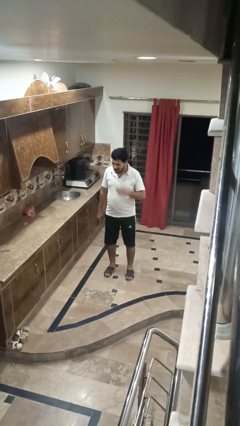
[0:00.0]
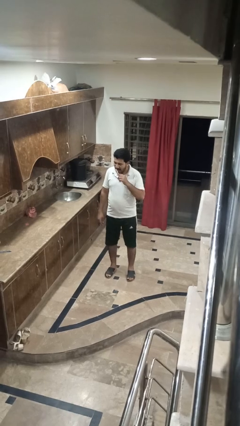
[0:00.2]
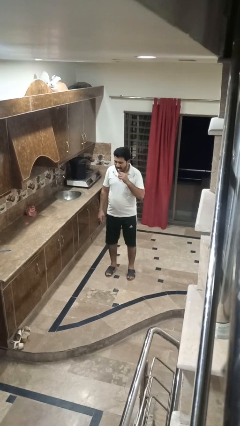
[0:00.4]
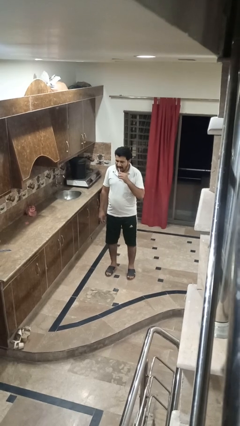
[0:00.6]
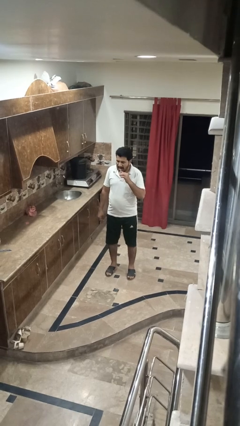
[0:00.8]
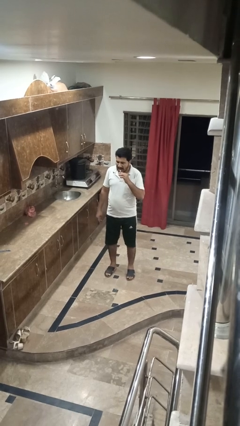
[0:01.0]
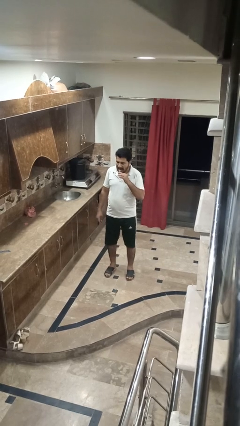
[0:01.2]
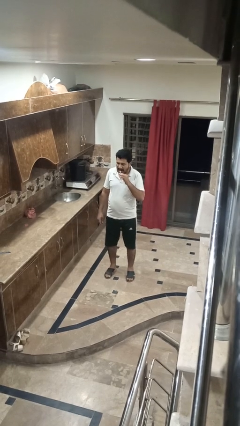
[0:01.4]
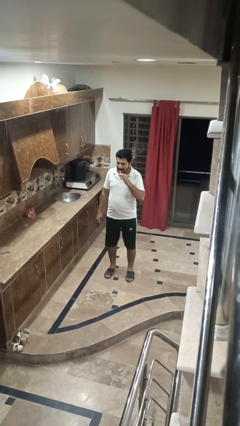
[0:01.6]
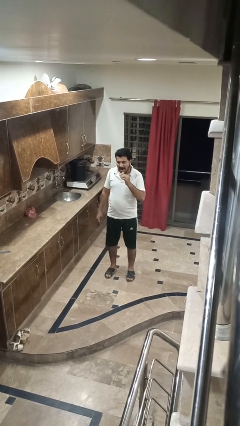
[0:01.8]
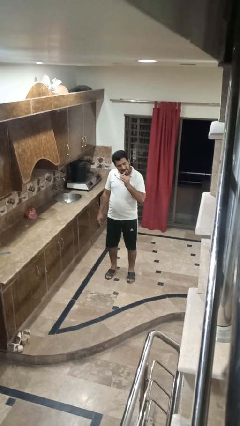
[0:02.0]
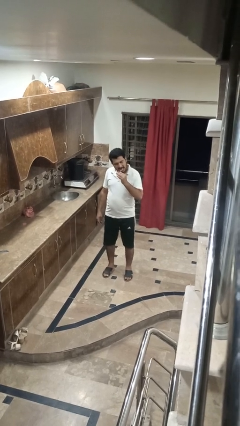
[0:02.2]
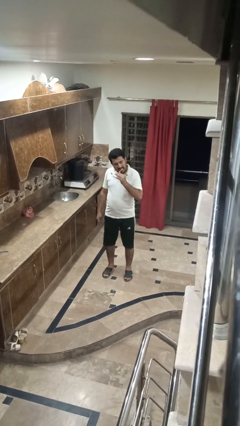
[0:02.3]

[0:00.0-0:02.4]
person brushes teeth

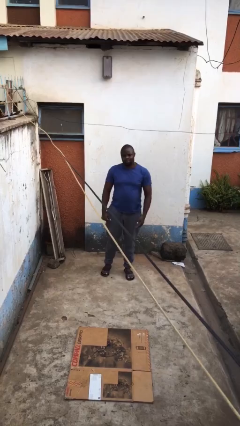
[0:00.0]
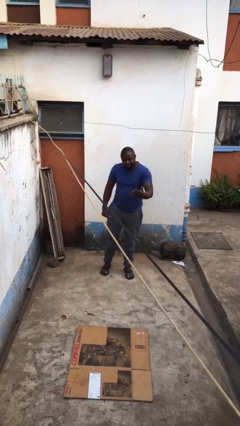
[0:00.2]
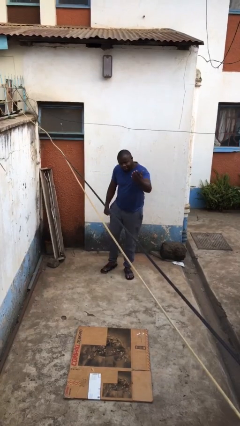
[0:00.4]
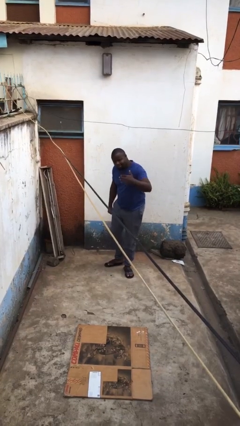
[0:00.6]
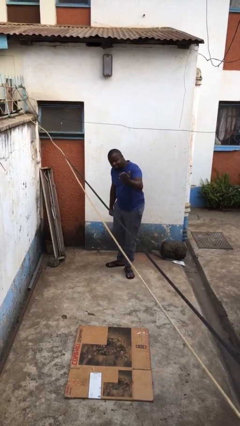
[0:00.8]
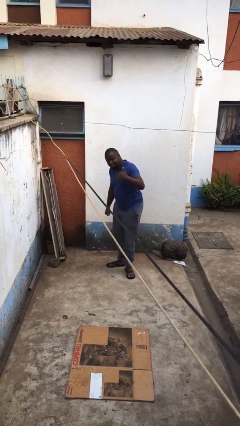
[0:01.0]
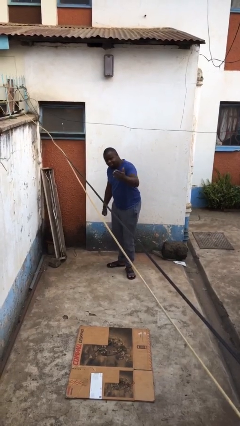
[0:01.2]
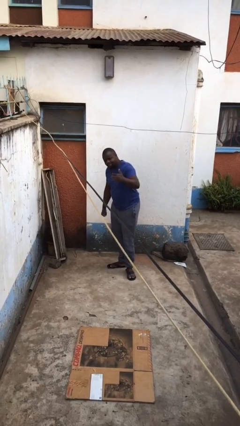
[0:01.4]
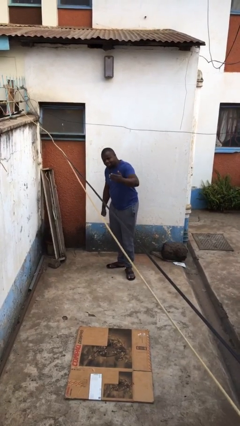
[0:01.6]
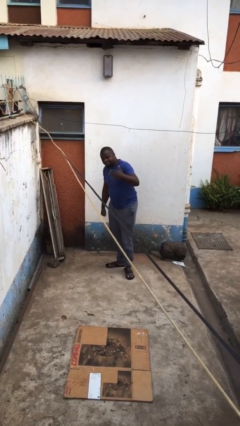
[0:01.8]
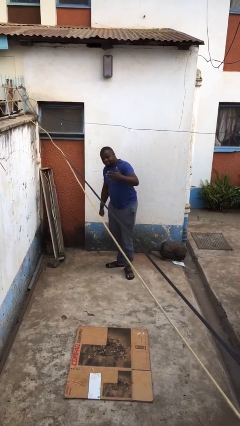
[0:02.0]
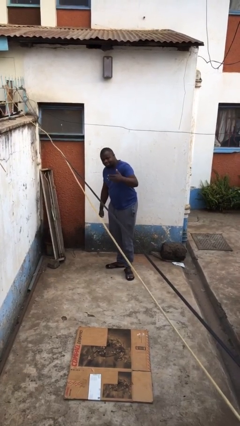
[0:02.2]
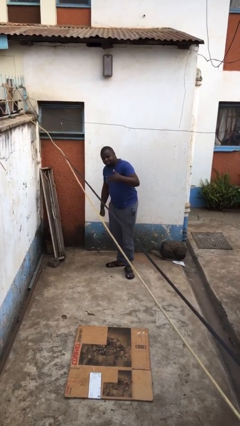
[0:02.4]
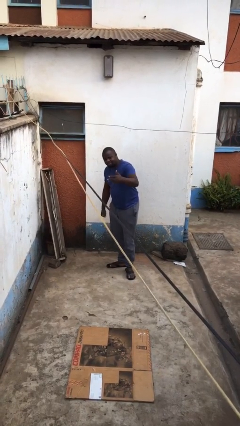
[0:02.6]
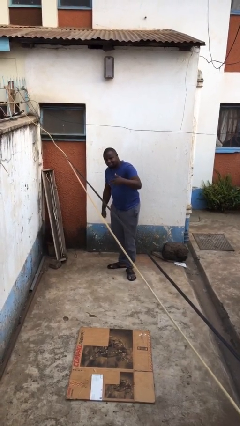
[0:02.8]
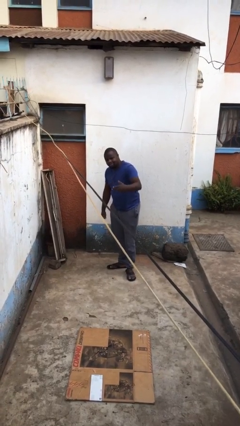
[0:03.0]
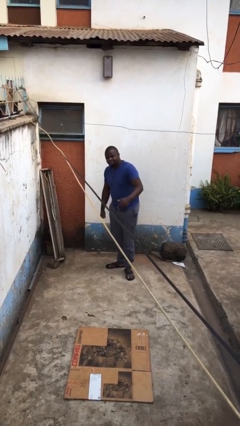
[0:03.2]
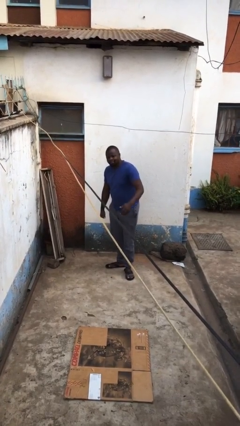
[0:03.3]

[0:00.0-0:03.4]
person gestures come here

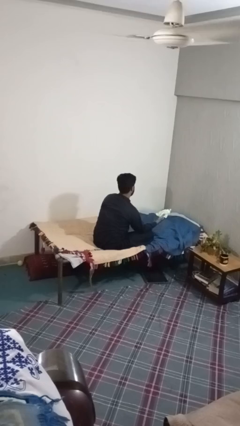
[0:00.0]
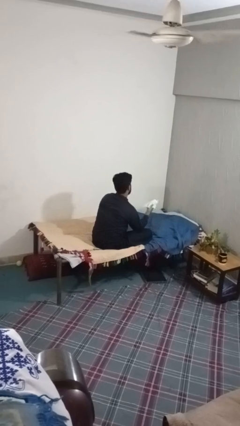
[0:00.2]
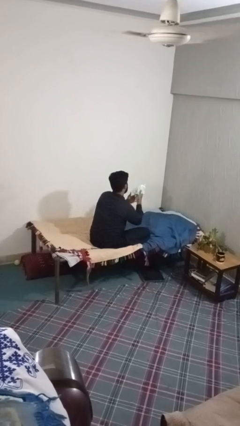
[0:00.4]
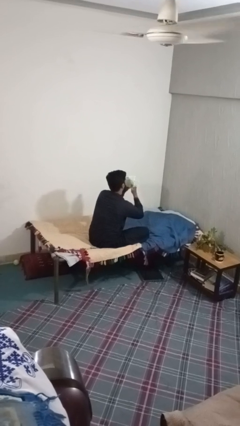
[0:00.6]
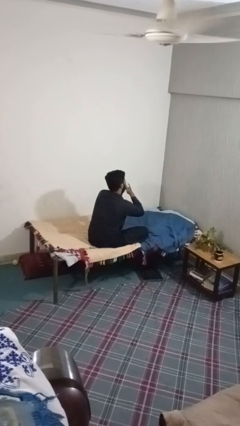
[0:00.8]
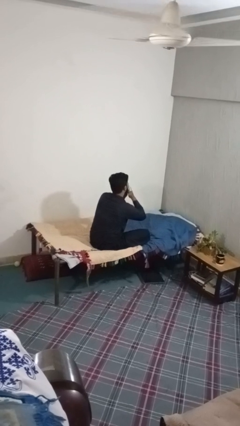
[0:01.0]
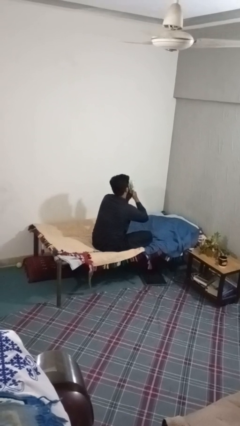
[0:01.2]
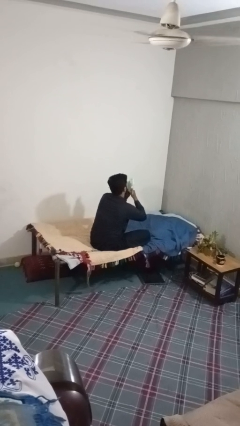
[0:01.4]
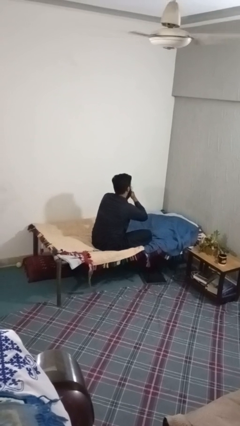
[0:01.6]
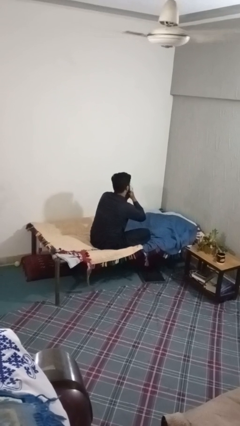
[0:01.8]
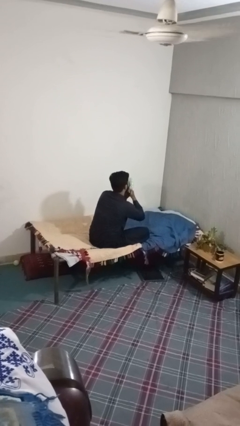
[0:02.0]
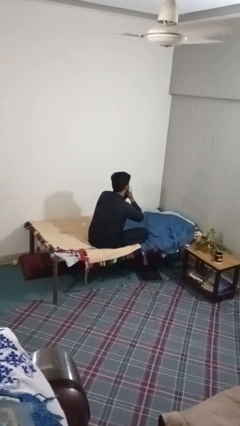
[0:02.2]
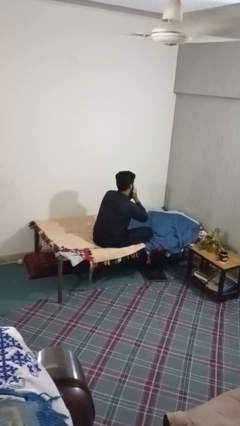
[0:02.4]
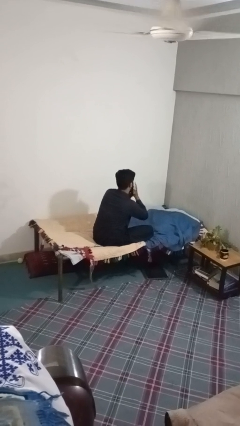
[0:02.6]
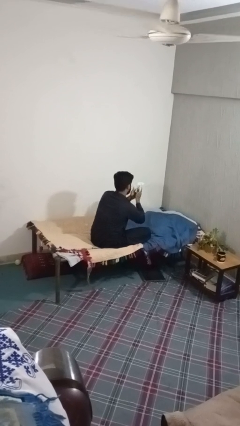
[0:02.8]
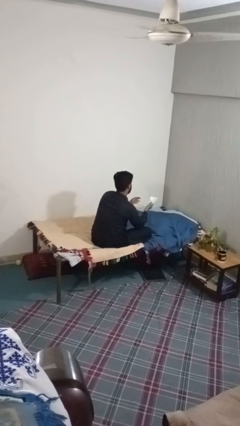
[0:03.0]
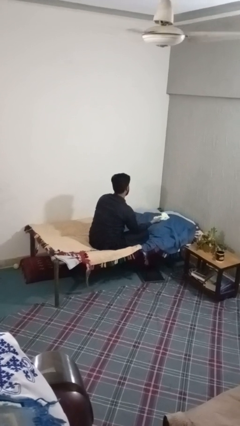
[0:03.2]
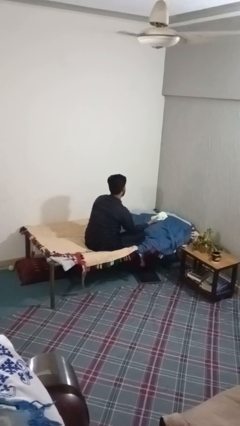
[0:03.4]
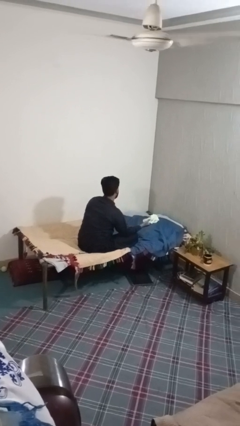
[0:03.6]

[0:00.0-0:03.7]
person blows nose

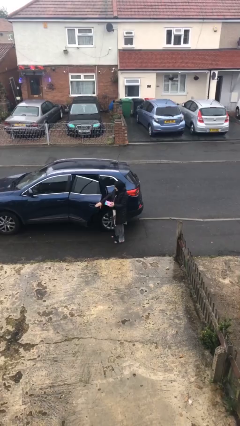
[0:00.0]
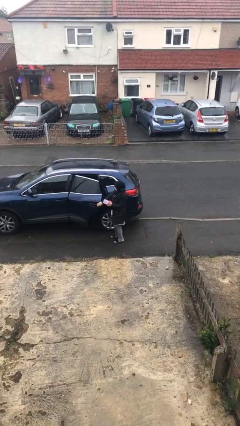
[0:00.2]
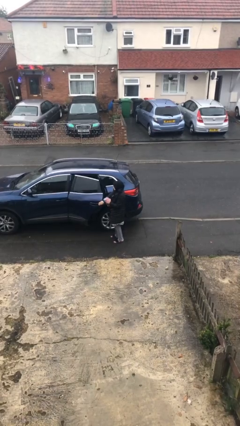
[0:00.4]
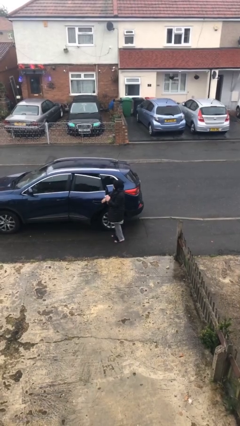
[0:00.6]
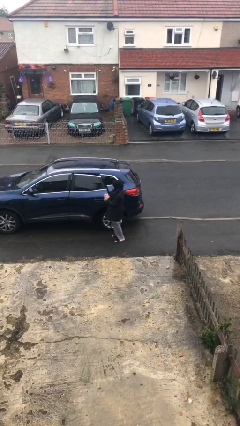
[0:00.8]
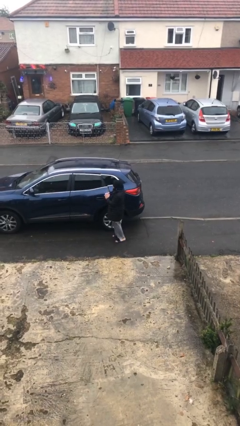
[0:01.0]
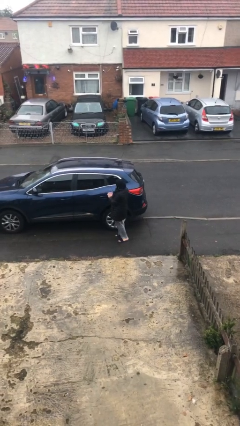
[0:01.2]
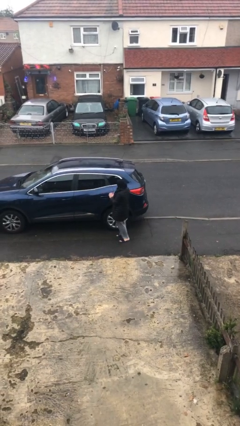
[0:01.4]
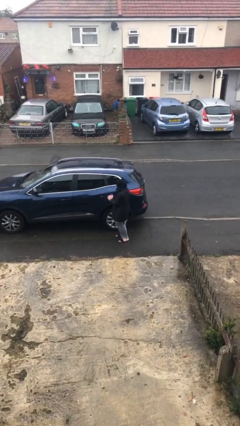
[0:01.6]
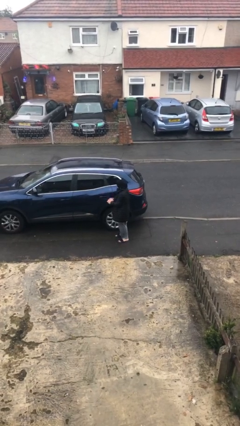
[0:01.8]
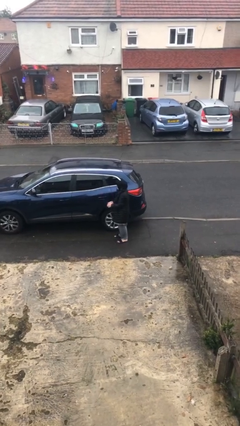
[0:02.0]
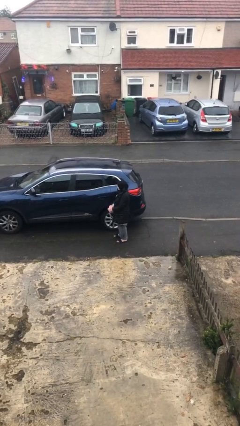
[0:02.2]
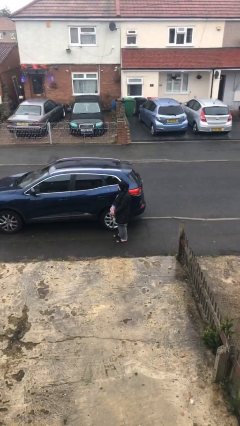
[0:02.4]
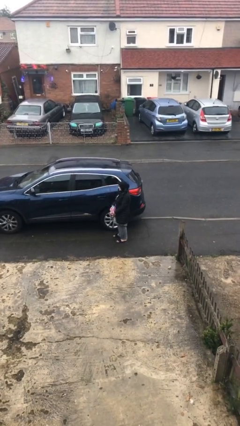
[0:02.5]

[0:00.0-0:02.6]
person closes car door

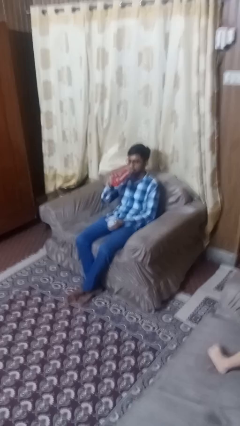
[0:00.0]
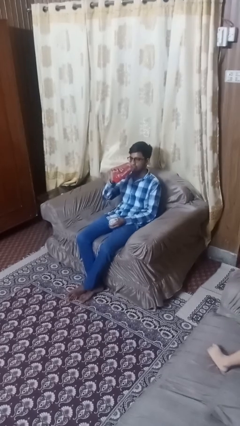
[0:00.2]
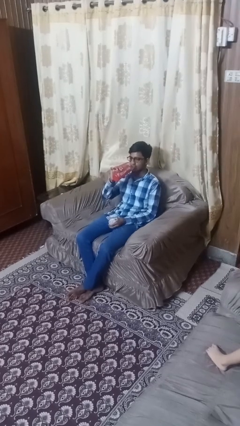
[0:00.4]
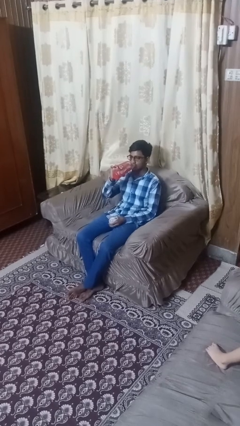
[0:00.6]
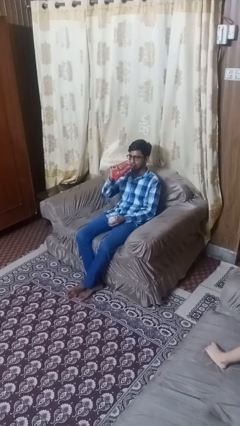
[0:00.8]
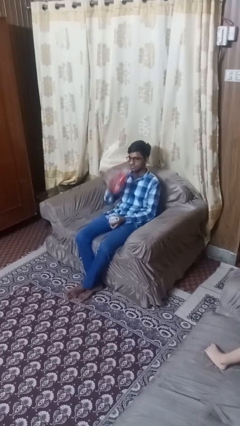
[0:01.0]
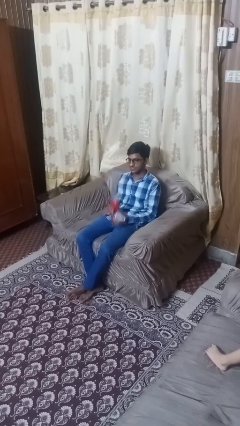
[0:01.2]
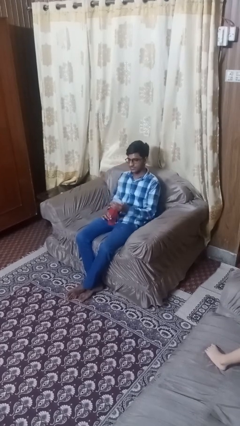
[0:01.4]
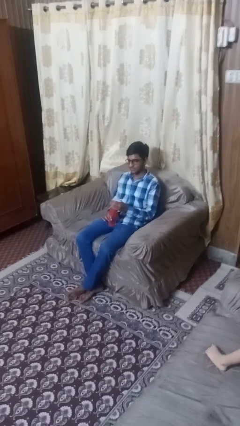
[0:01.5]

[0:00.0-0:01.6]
person drinks from bottle

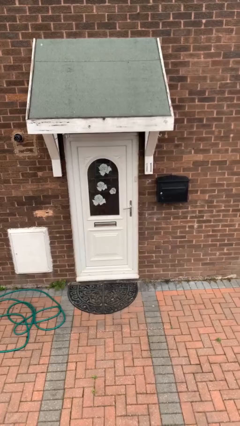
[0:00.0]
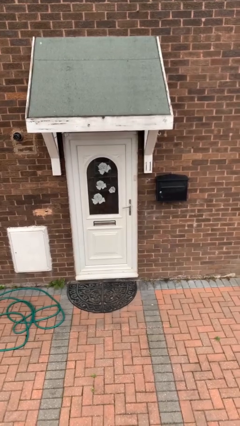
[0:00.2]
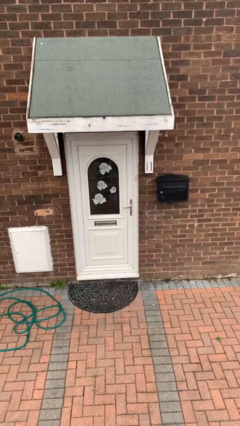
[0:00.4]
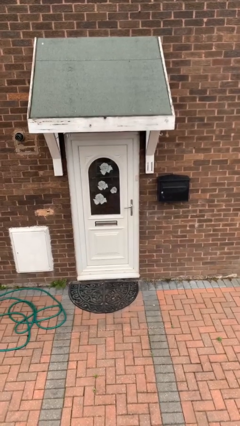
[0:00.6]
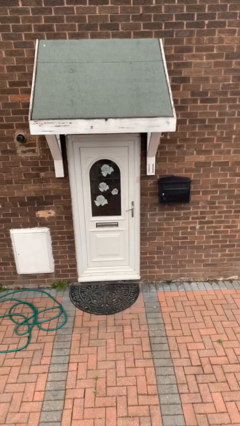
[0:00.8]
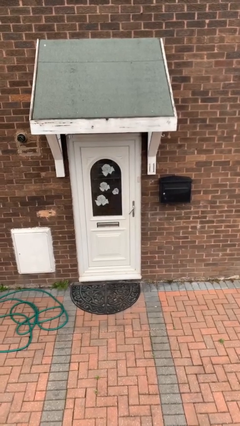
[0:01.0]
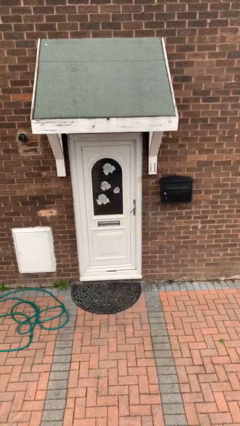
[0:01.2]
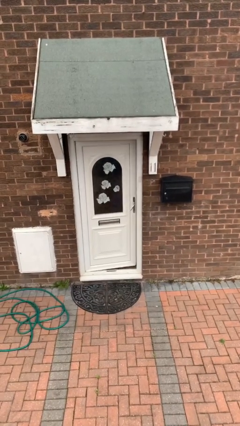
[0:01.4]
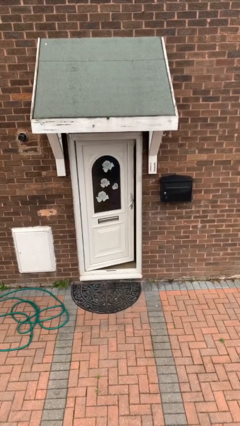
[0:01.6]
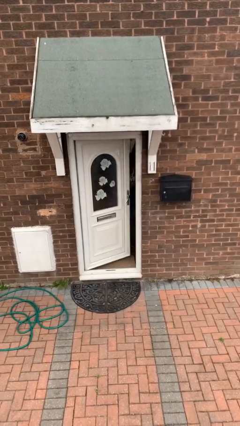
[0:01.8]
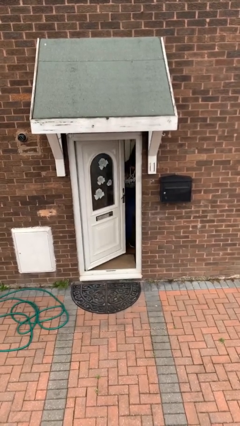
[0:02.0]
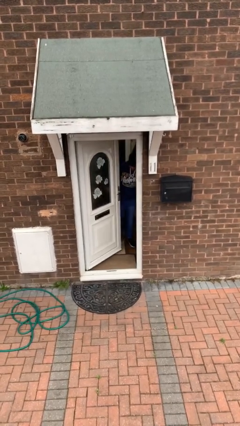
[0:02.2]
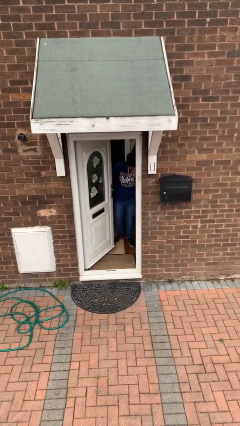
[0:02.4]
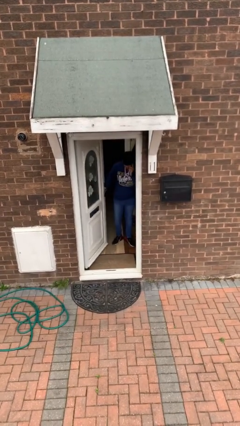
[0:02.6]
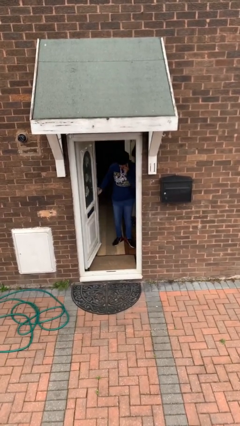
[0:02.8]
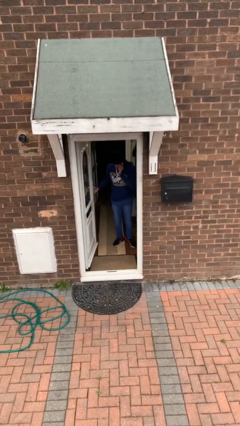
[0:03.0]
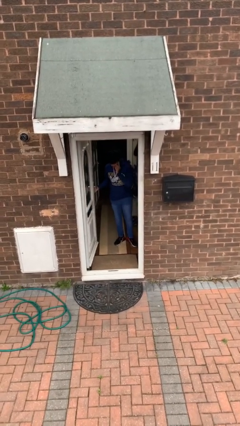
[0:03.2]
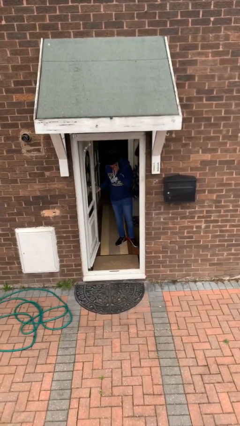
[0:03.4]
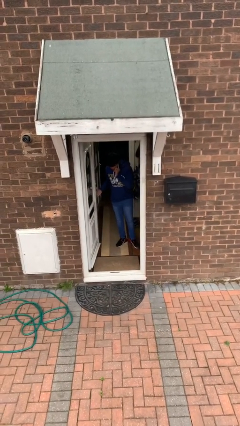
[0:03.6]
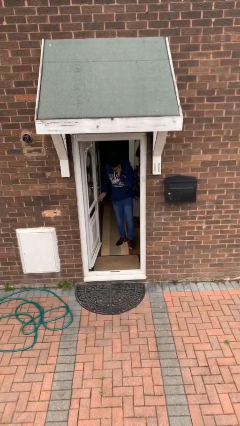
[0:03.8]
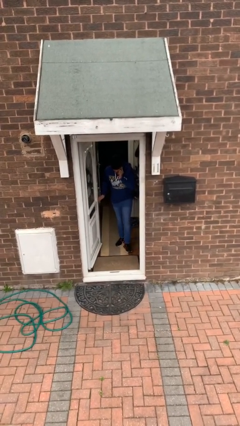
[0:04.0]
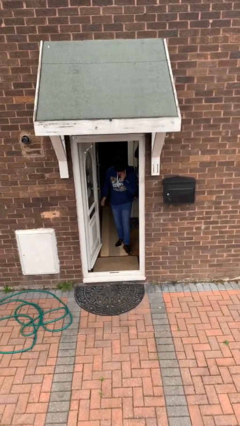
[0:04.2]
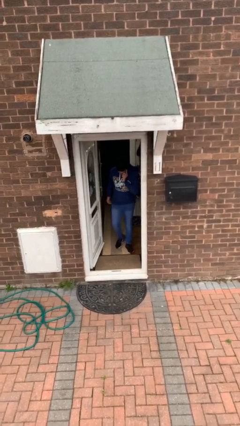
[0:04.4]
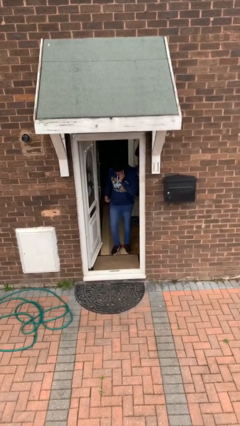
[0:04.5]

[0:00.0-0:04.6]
person opens facility door
